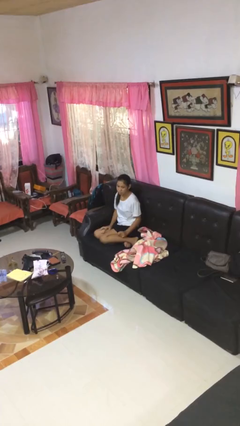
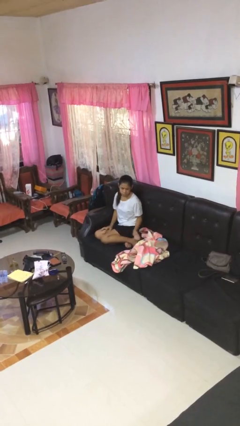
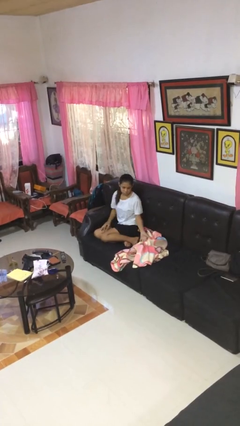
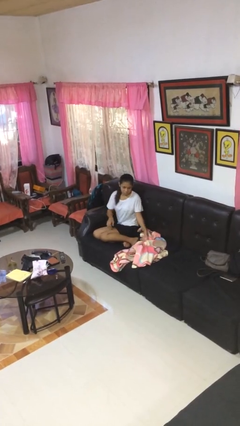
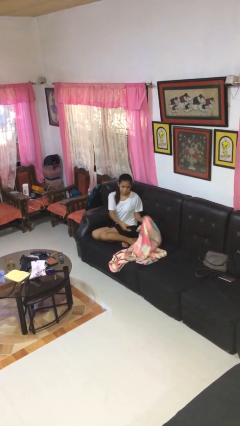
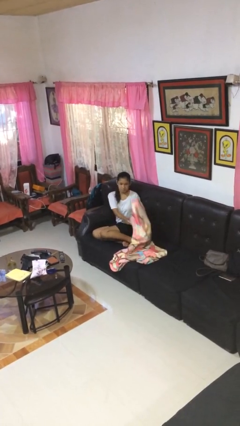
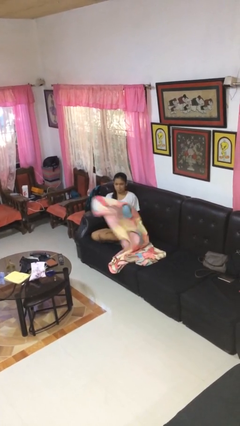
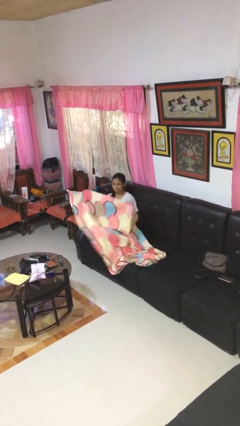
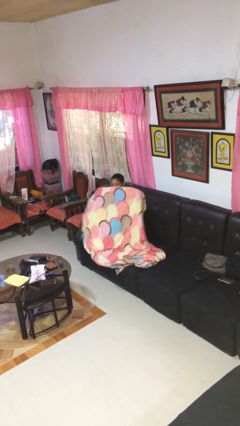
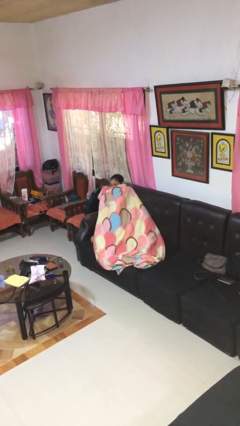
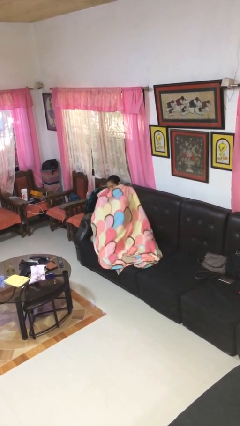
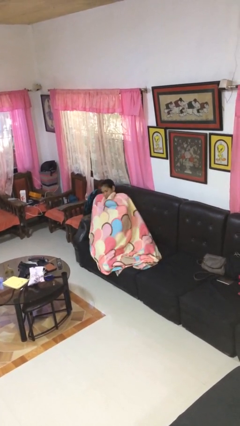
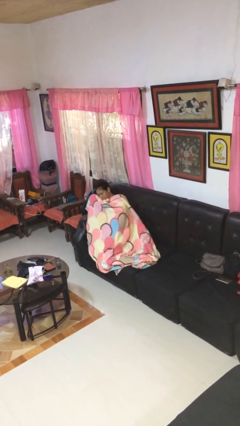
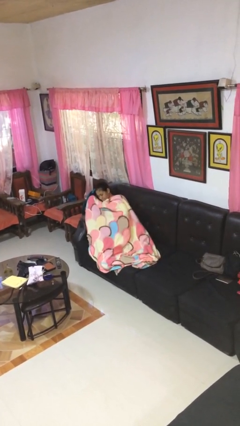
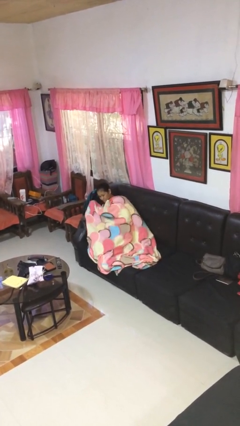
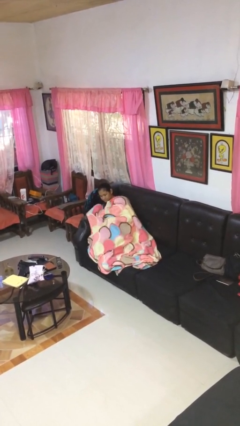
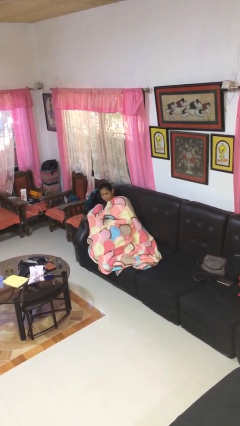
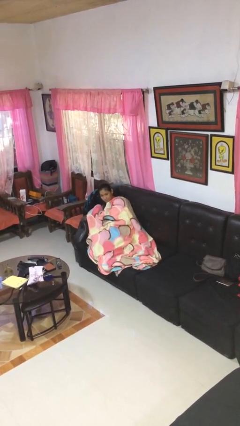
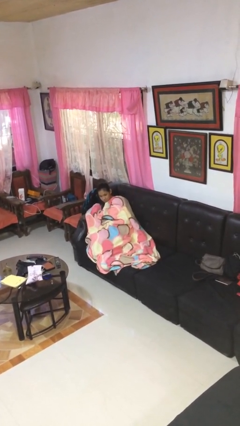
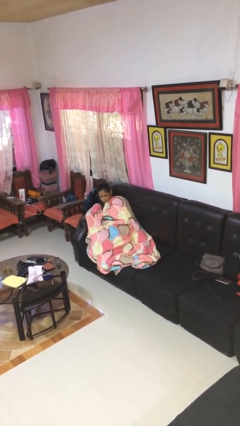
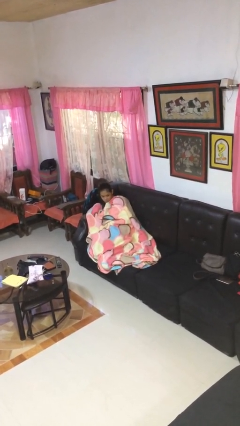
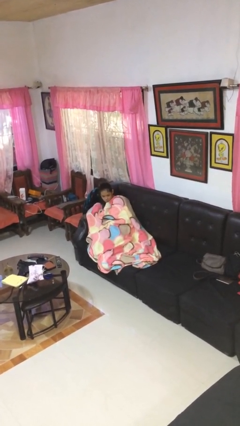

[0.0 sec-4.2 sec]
person covers with blanket

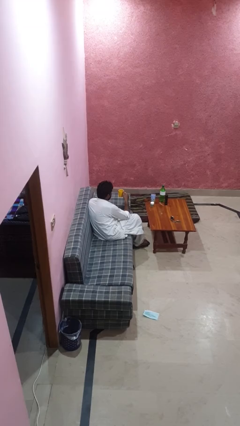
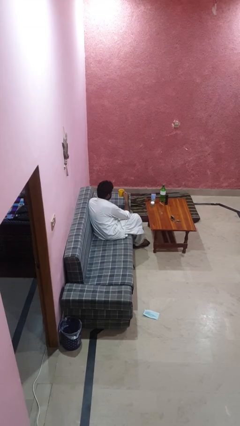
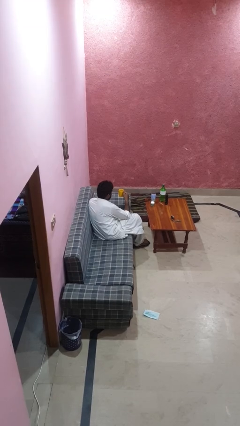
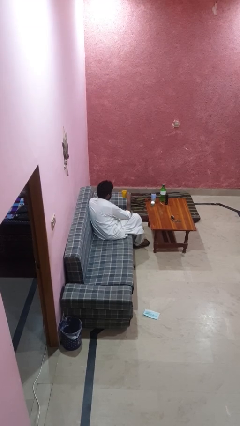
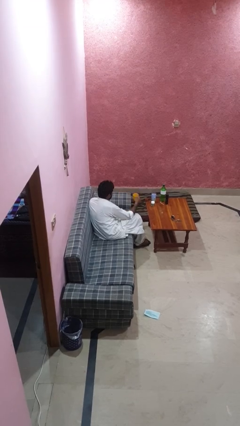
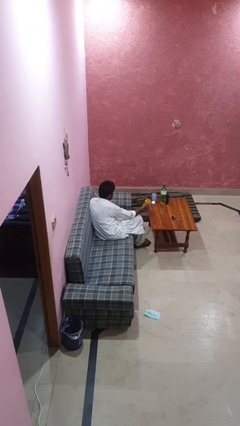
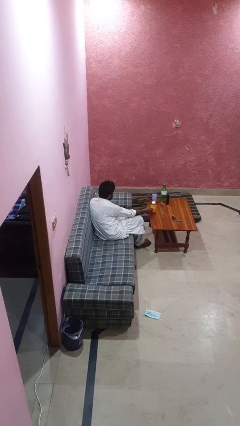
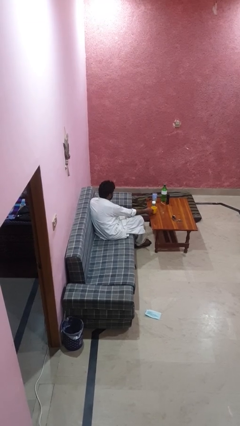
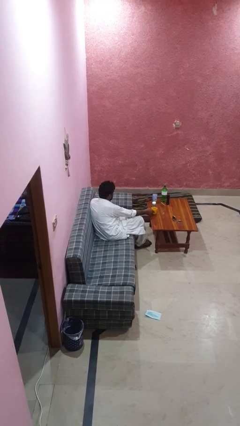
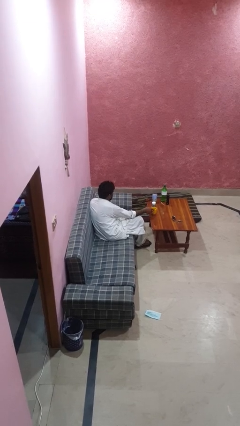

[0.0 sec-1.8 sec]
person puts down object on table

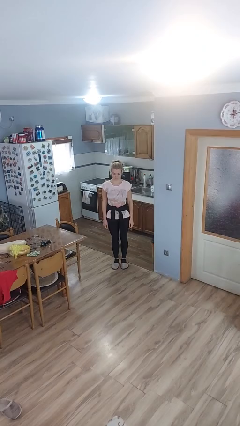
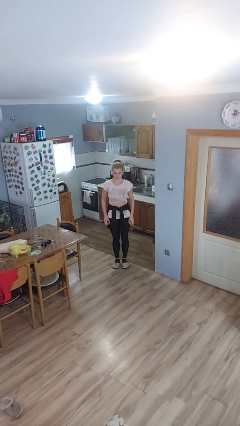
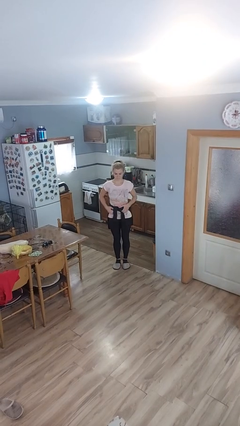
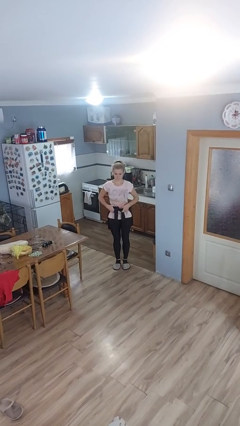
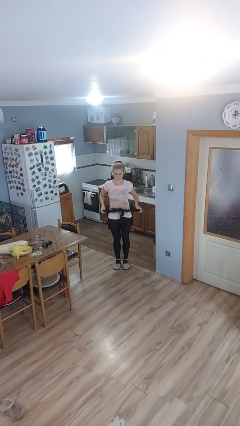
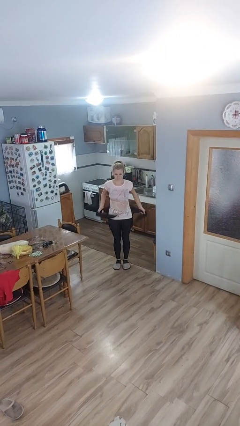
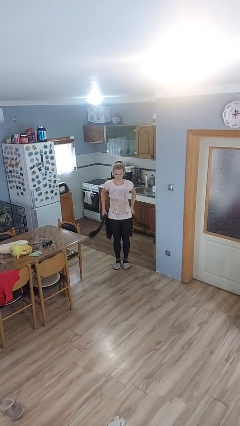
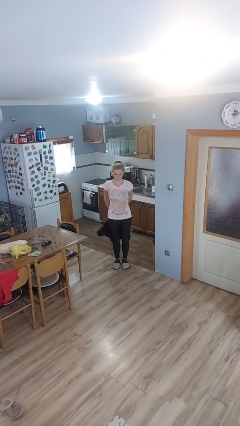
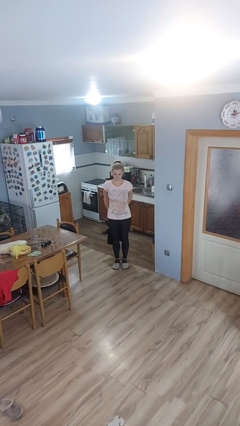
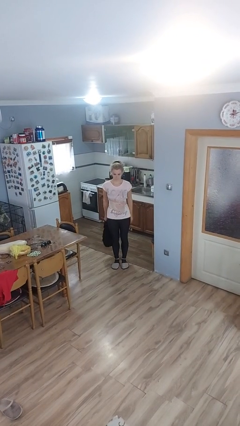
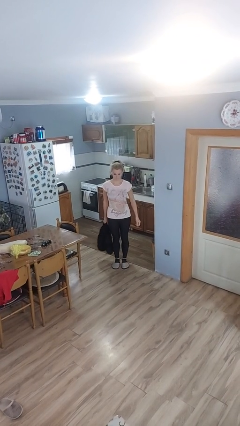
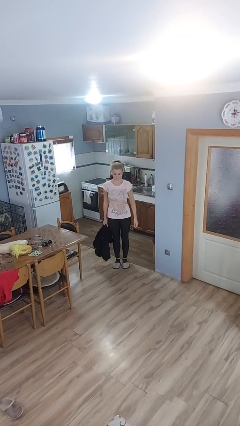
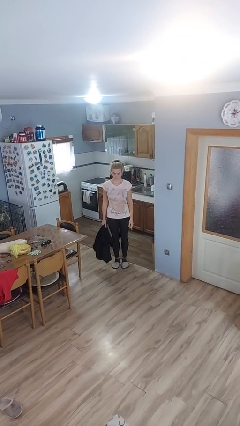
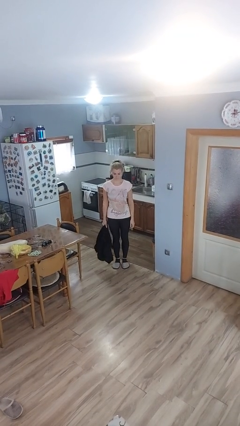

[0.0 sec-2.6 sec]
person unties jacket around waist

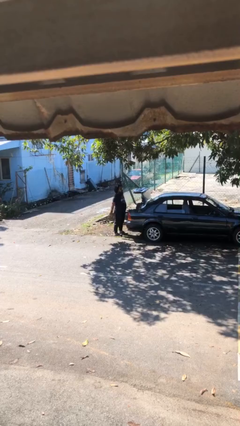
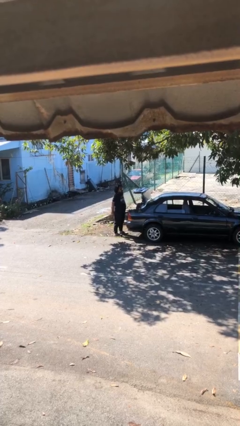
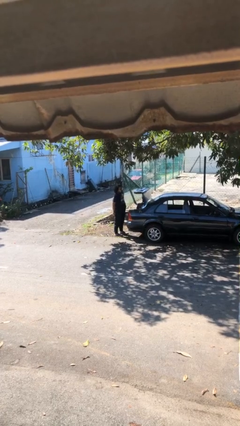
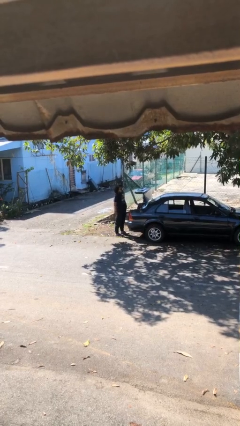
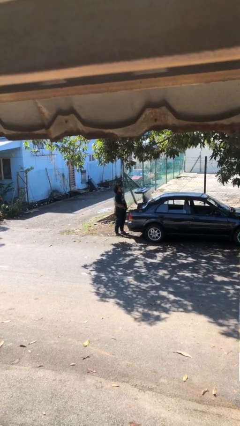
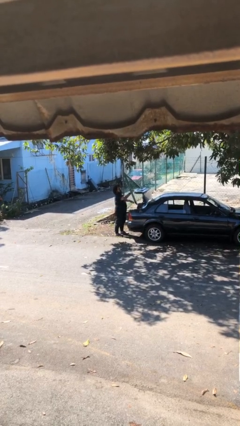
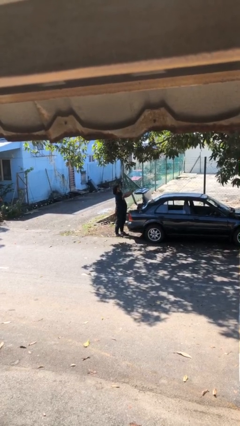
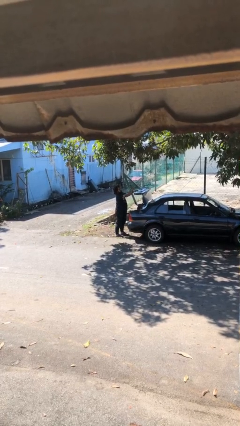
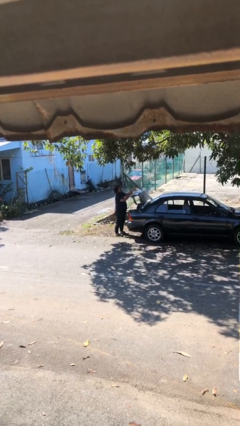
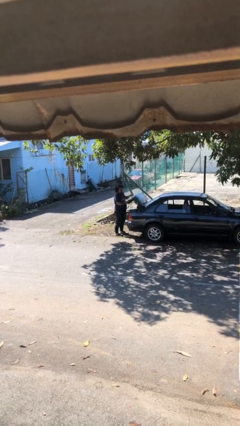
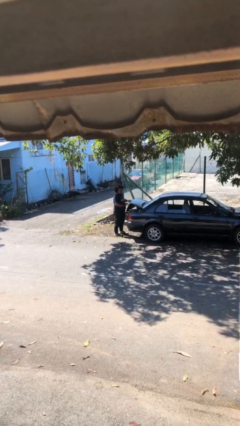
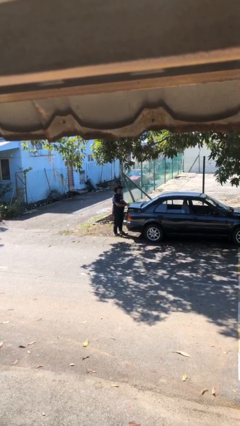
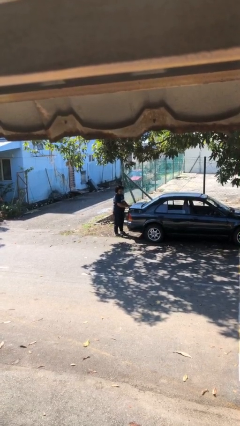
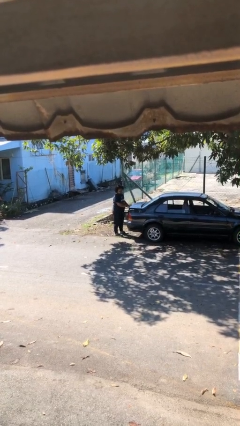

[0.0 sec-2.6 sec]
person closes car trunk

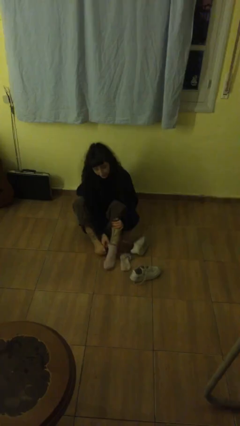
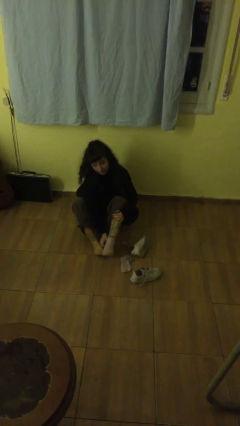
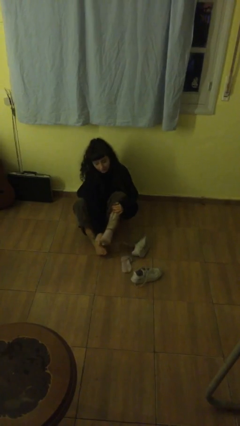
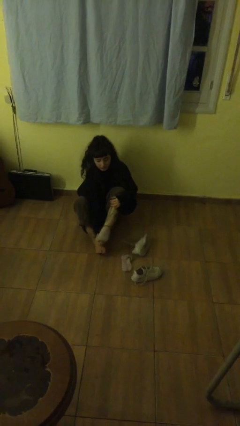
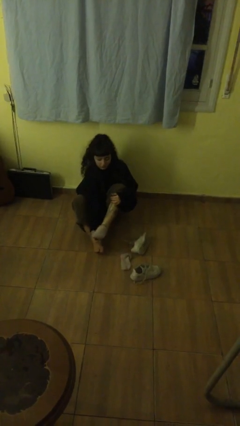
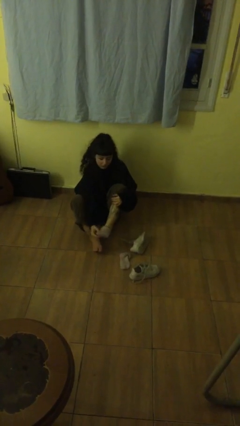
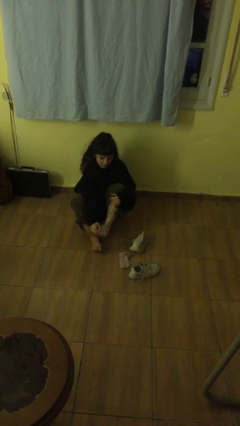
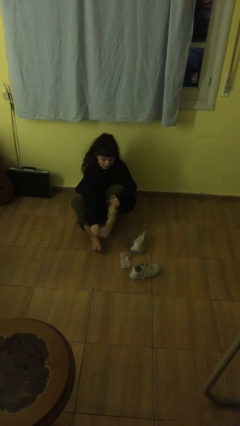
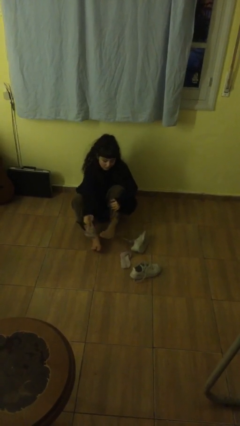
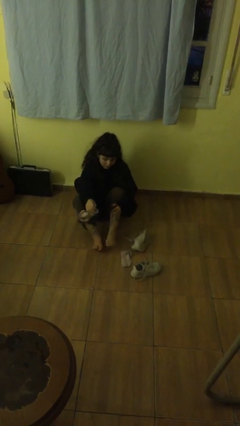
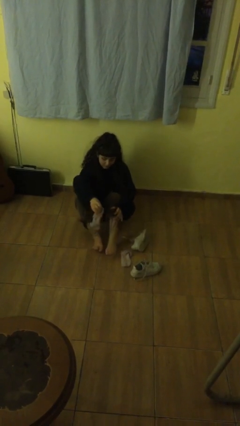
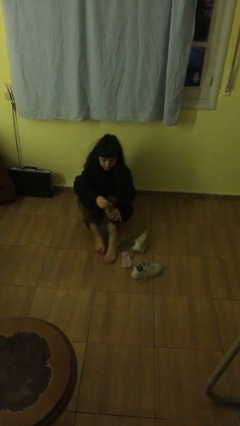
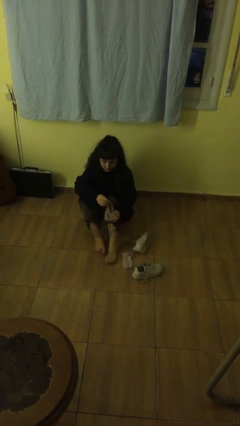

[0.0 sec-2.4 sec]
person takes off socks

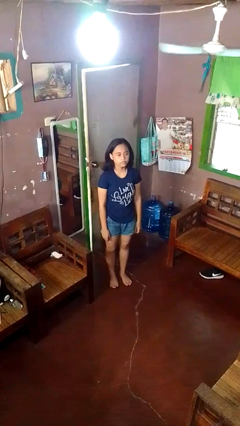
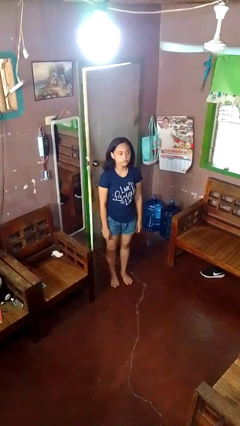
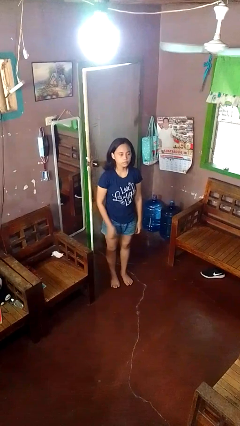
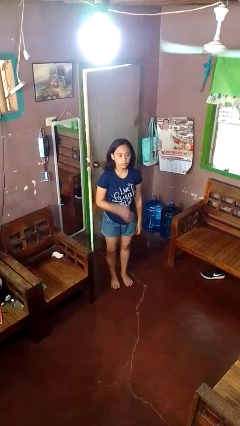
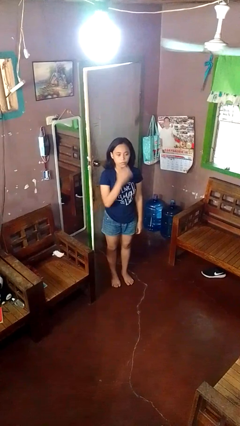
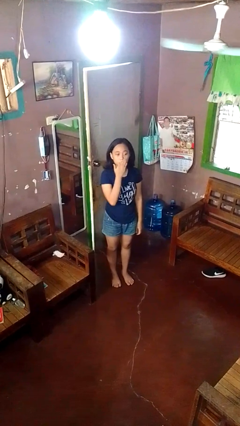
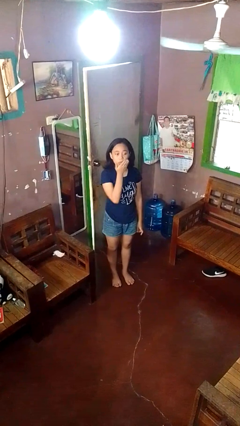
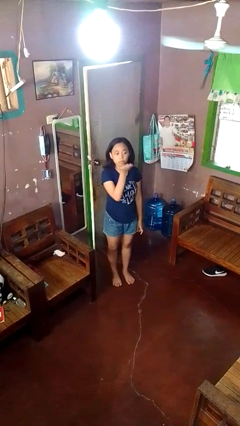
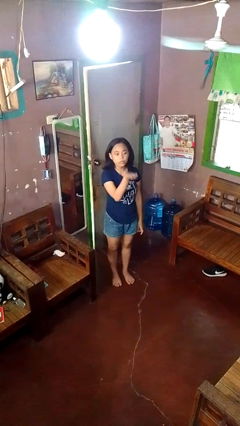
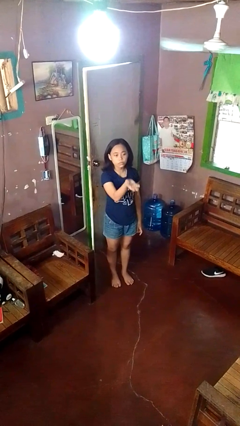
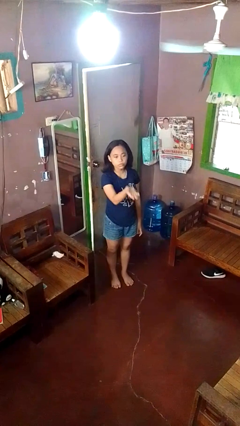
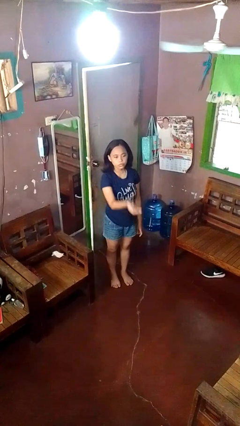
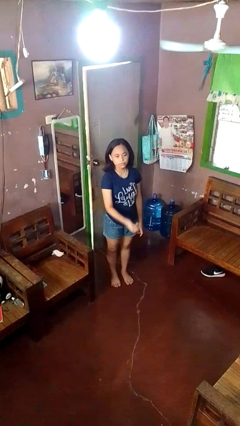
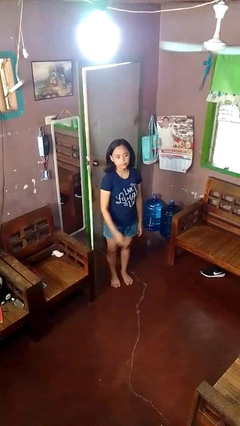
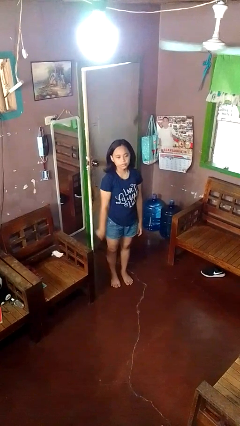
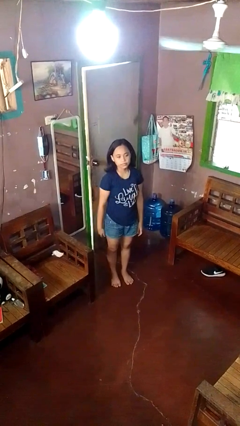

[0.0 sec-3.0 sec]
person gestures blow kiss

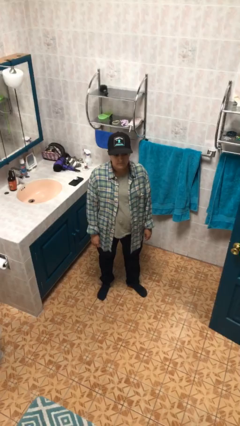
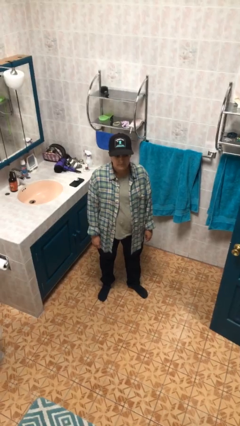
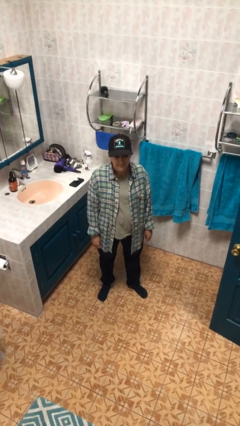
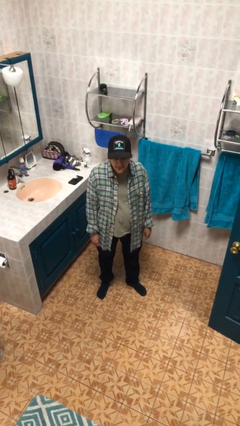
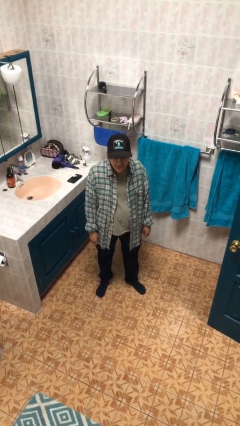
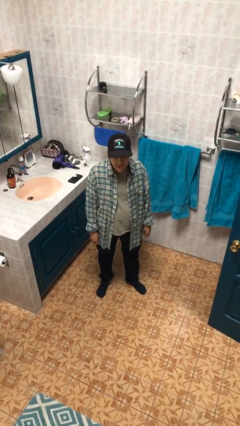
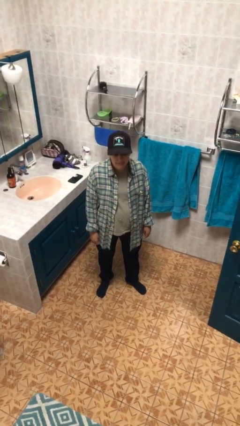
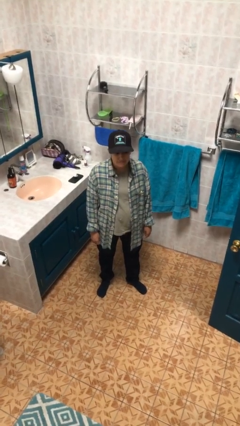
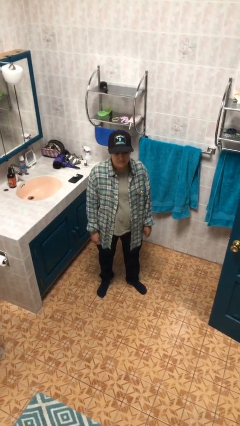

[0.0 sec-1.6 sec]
person sticks out tongue
